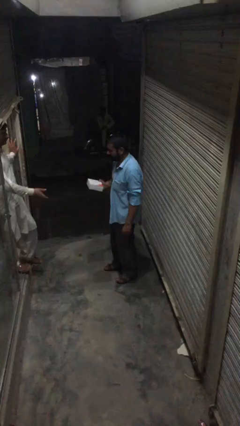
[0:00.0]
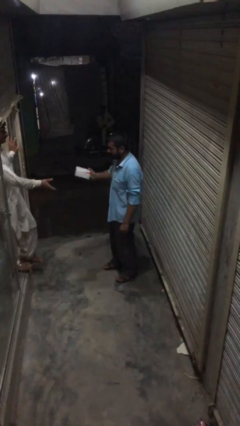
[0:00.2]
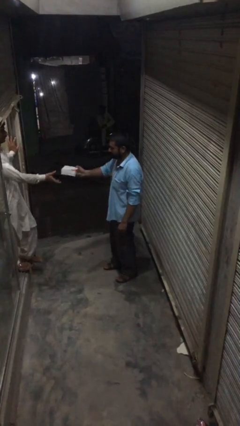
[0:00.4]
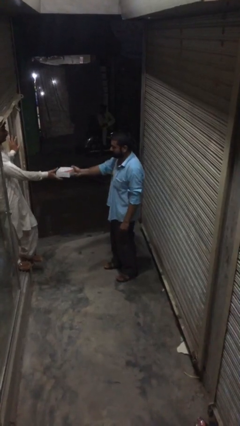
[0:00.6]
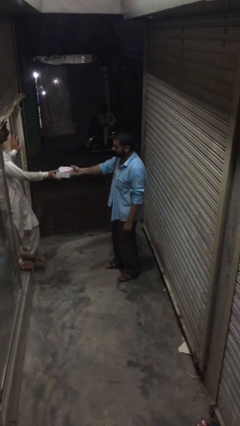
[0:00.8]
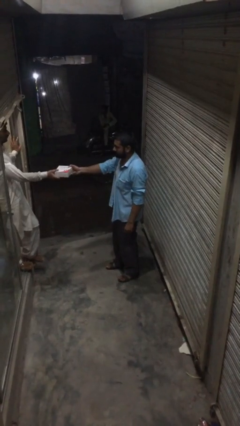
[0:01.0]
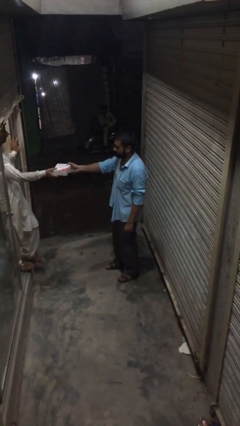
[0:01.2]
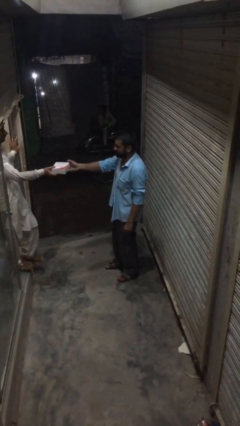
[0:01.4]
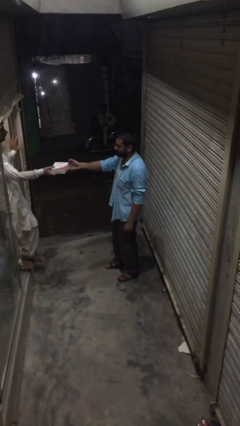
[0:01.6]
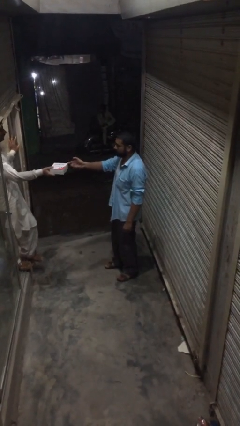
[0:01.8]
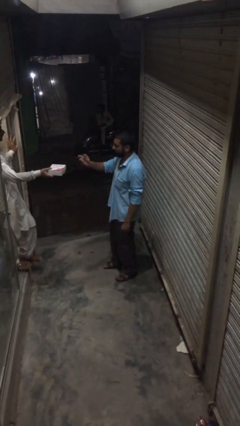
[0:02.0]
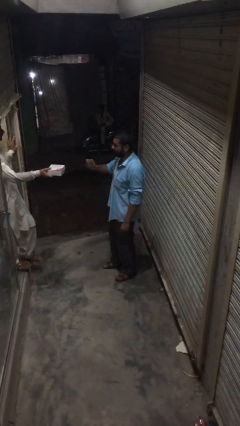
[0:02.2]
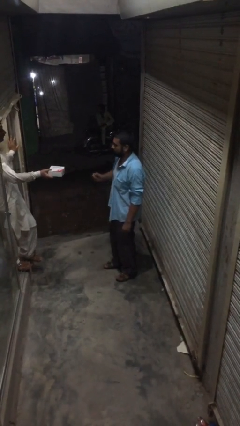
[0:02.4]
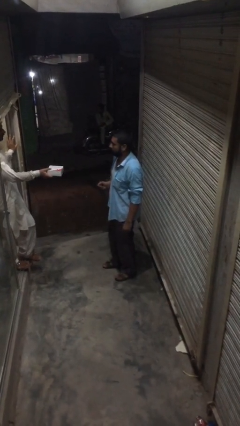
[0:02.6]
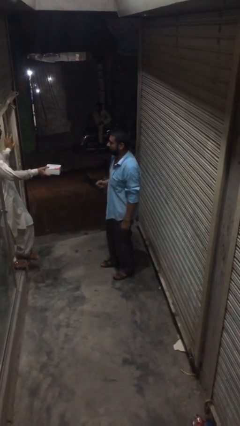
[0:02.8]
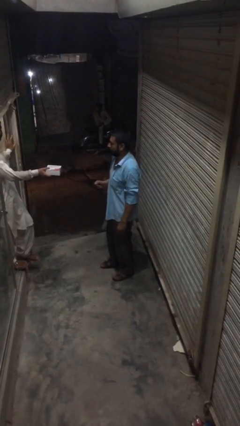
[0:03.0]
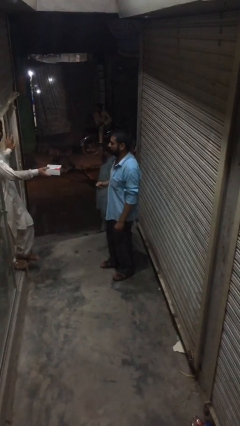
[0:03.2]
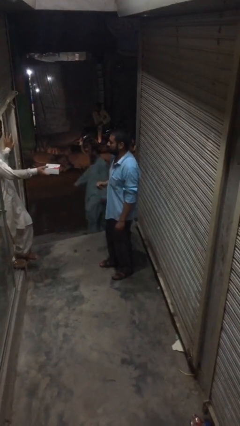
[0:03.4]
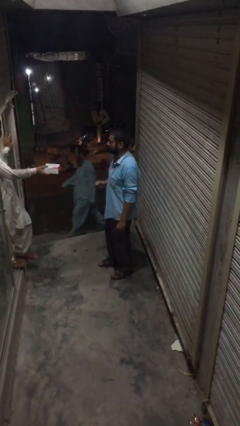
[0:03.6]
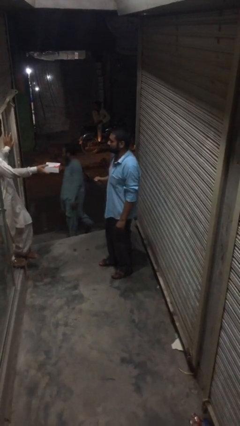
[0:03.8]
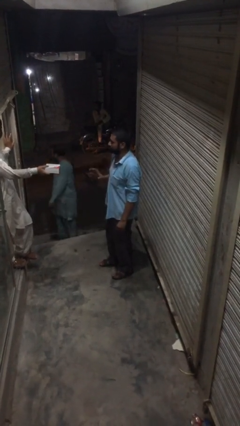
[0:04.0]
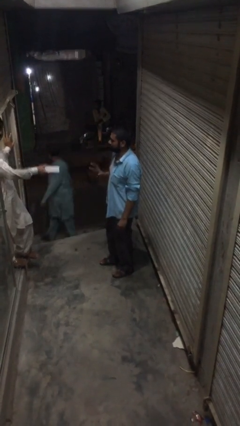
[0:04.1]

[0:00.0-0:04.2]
person transfers object to person

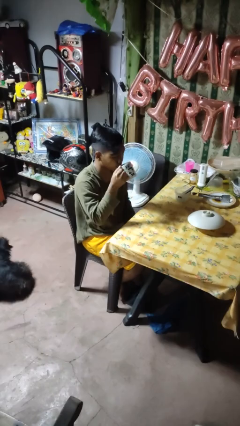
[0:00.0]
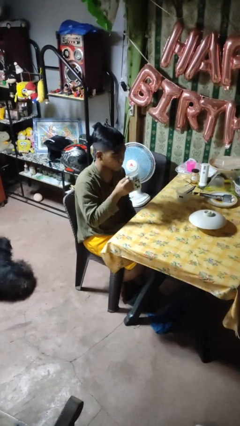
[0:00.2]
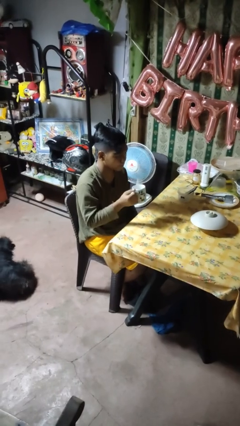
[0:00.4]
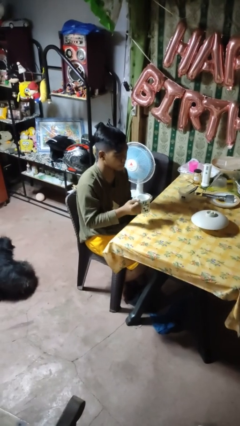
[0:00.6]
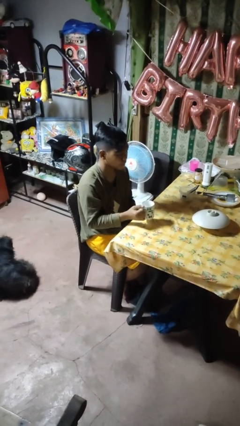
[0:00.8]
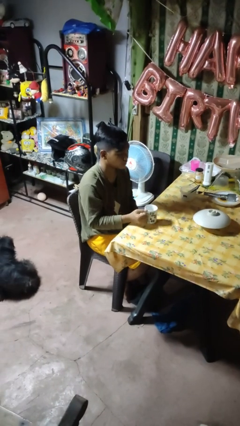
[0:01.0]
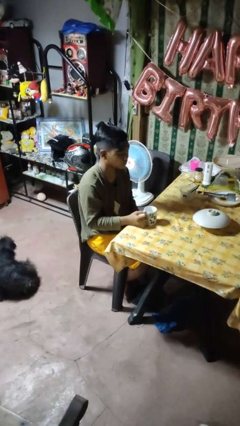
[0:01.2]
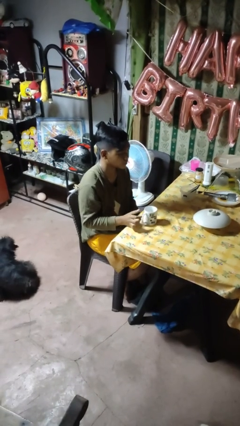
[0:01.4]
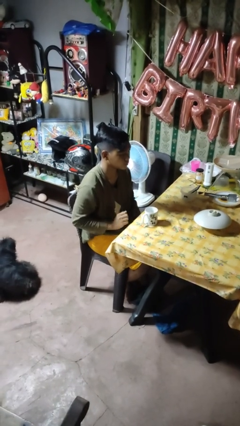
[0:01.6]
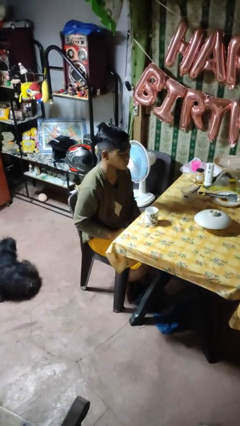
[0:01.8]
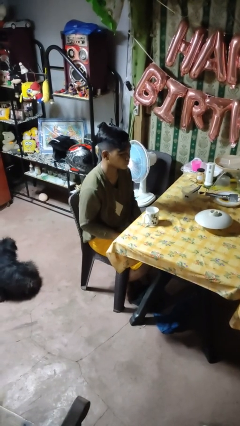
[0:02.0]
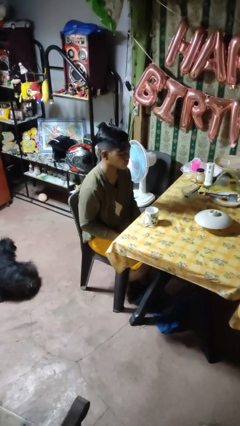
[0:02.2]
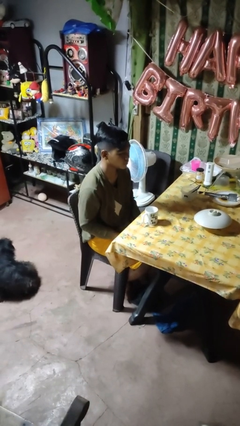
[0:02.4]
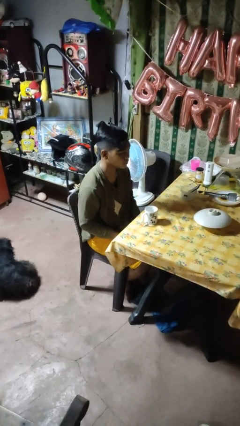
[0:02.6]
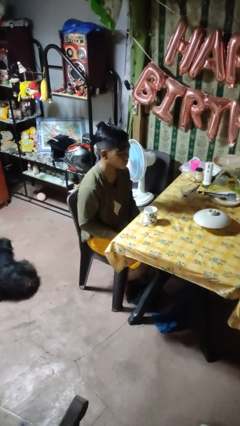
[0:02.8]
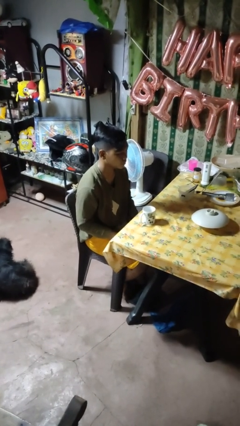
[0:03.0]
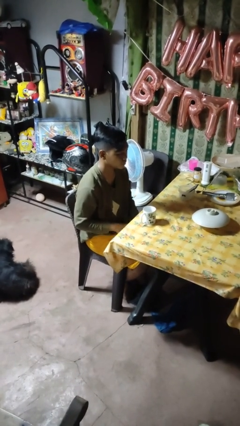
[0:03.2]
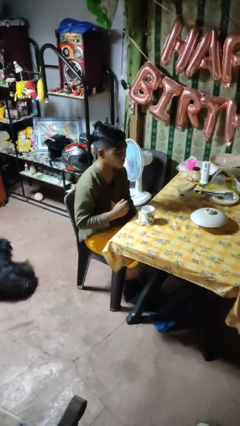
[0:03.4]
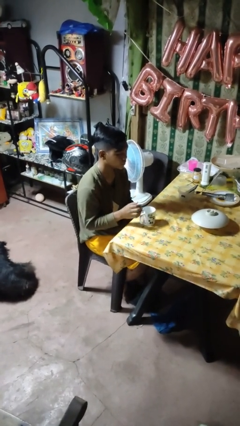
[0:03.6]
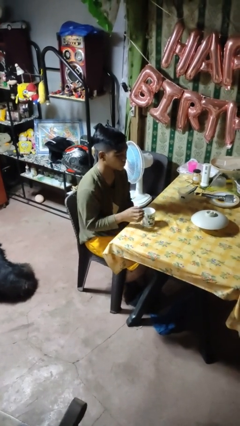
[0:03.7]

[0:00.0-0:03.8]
person puts down object on table

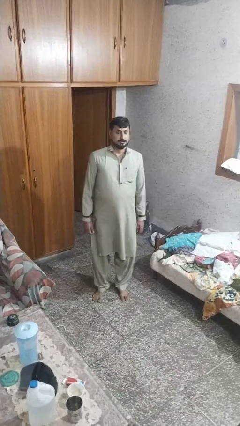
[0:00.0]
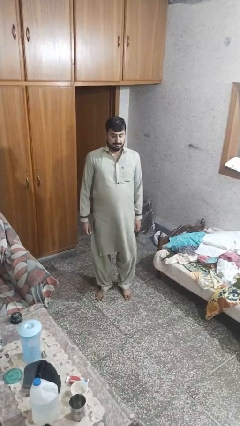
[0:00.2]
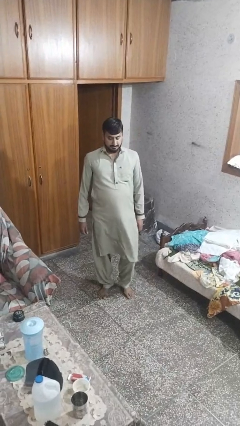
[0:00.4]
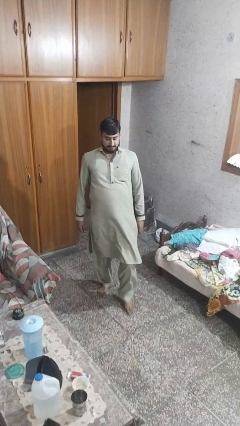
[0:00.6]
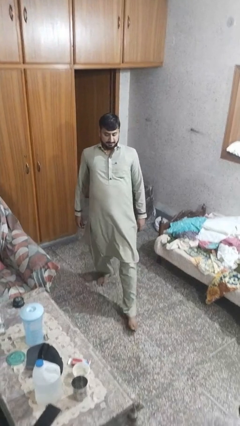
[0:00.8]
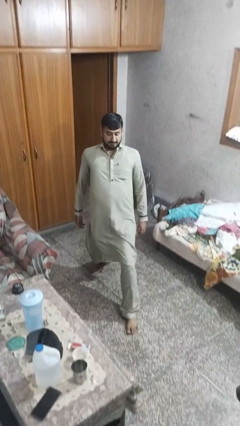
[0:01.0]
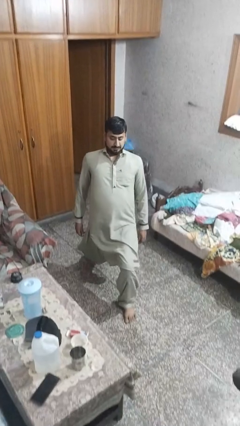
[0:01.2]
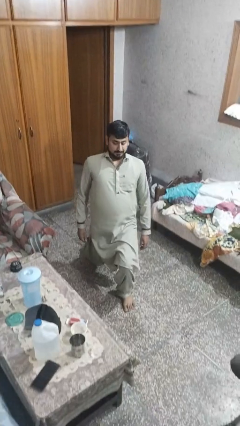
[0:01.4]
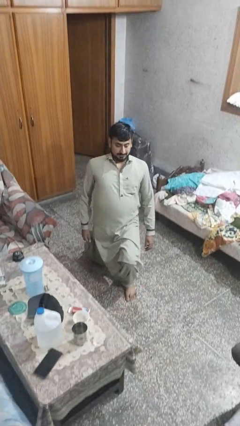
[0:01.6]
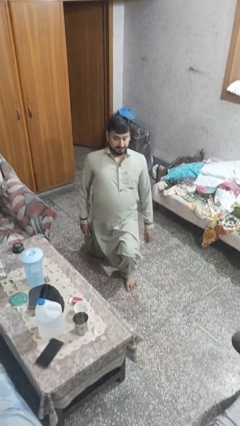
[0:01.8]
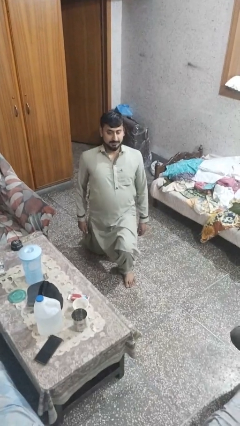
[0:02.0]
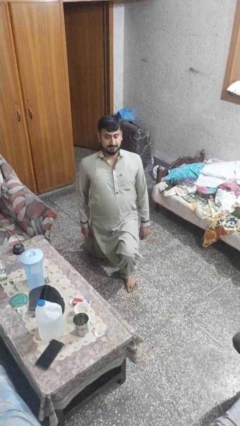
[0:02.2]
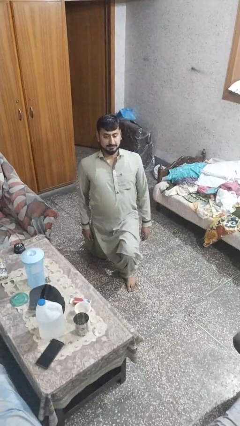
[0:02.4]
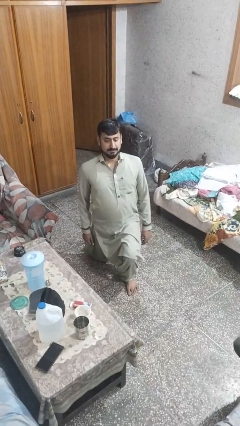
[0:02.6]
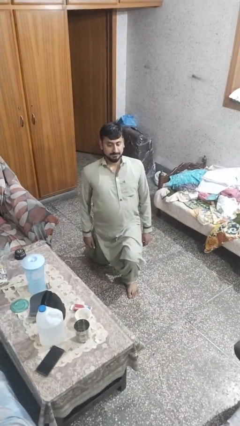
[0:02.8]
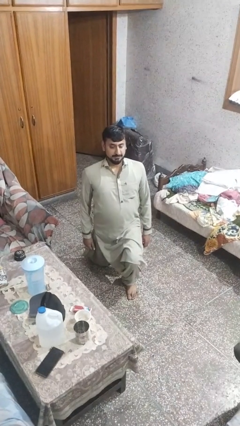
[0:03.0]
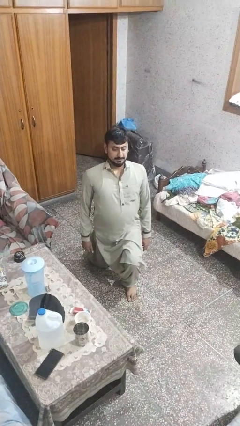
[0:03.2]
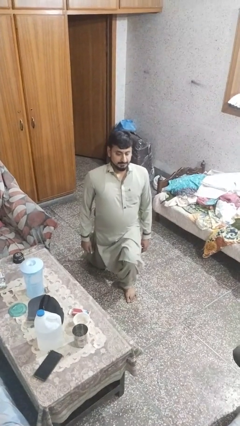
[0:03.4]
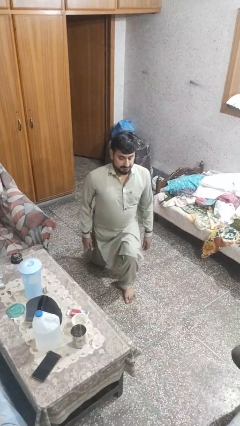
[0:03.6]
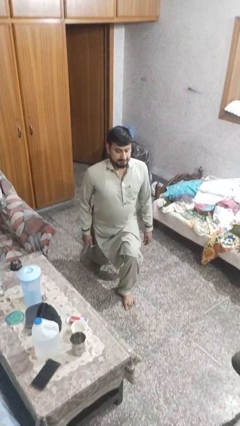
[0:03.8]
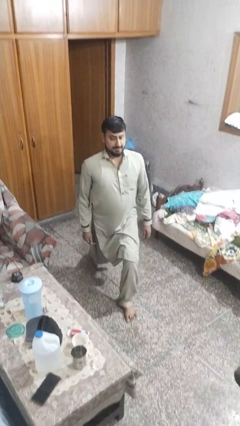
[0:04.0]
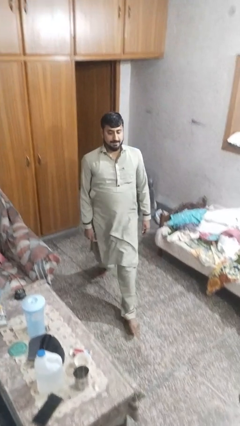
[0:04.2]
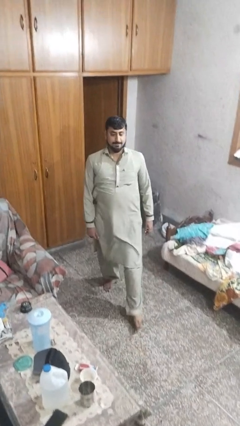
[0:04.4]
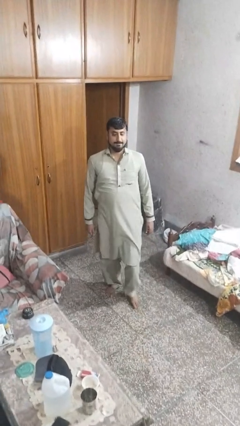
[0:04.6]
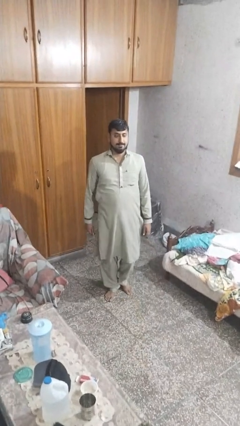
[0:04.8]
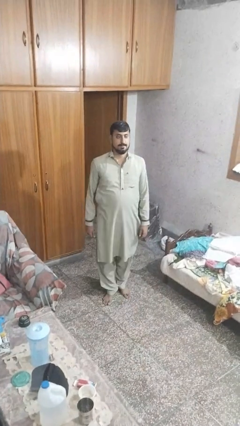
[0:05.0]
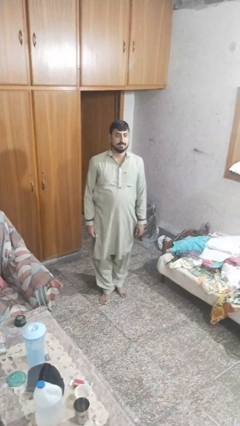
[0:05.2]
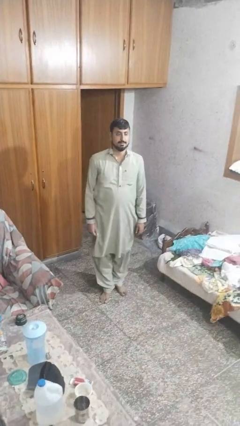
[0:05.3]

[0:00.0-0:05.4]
person exercises with lunges

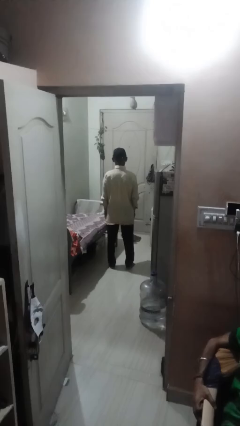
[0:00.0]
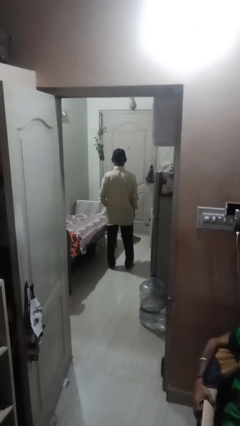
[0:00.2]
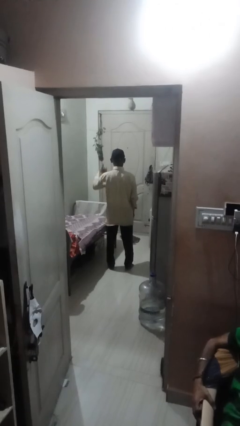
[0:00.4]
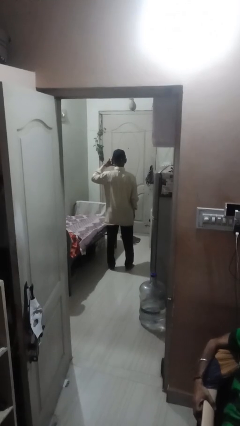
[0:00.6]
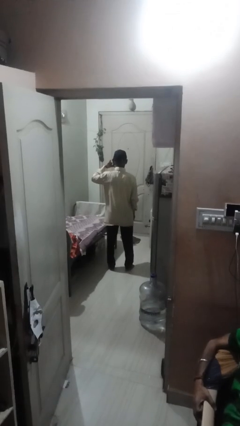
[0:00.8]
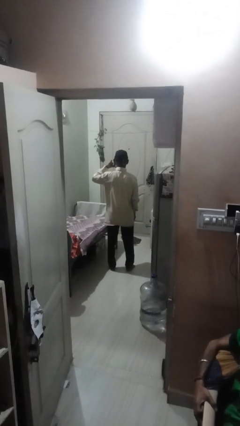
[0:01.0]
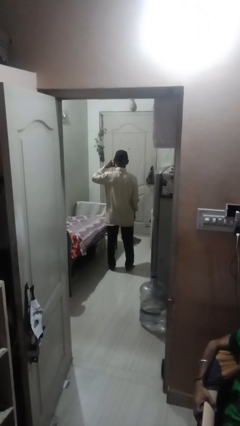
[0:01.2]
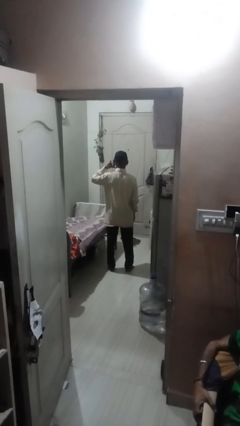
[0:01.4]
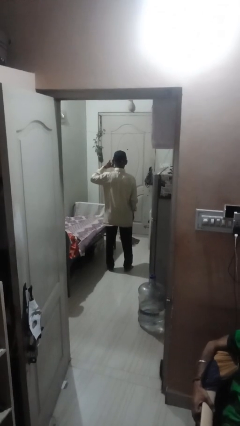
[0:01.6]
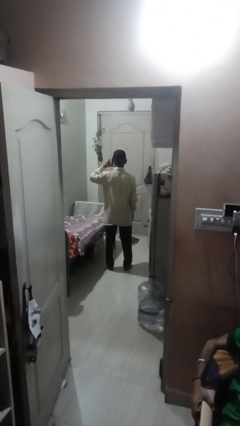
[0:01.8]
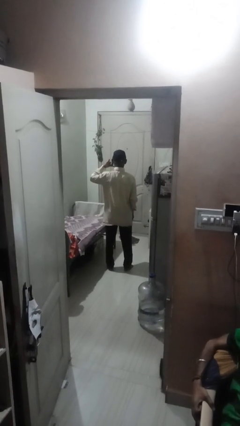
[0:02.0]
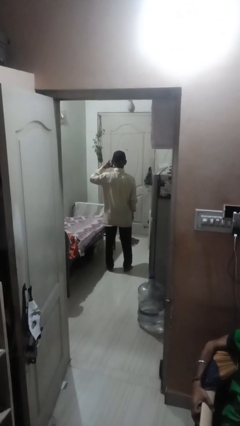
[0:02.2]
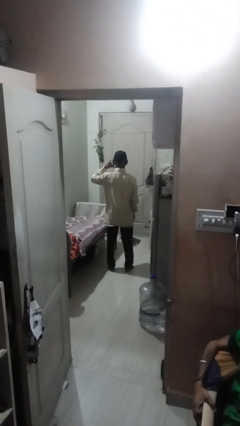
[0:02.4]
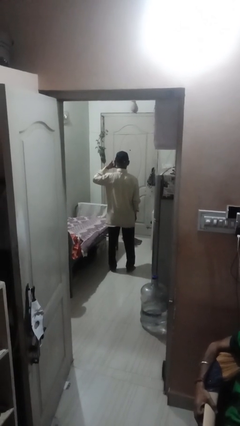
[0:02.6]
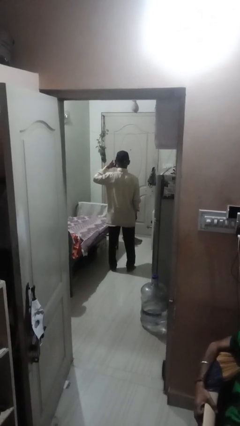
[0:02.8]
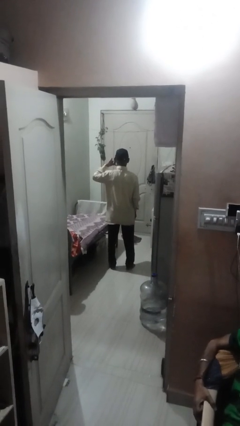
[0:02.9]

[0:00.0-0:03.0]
person gestures call me

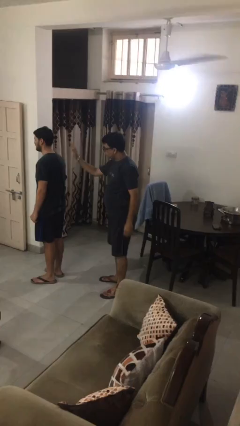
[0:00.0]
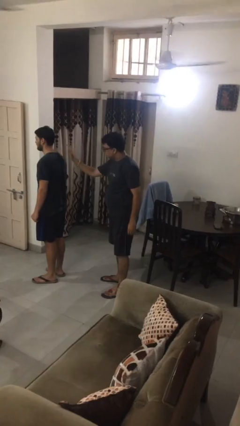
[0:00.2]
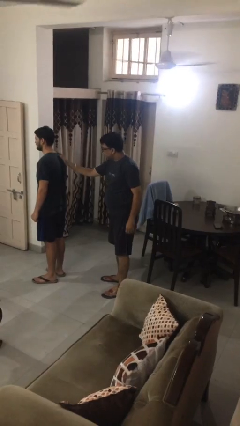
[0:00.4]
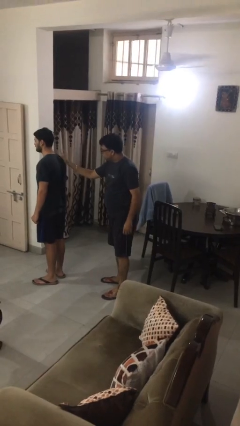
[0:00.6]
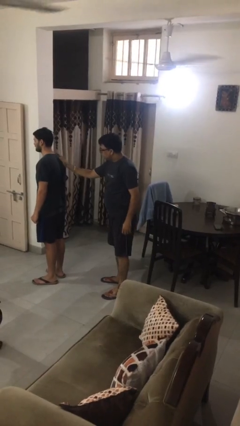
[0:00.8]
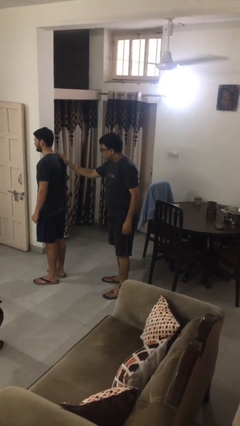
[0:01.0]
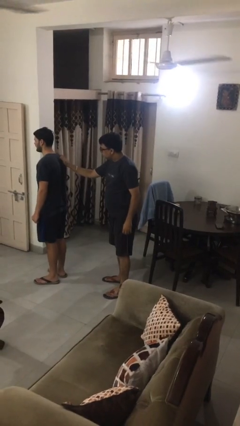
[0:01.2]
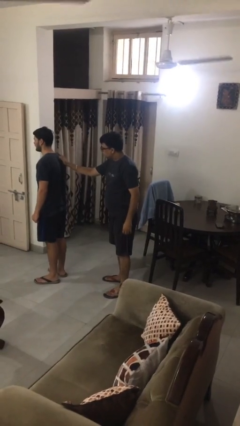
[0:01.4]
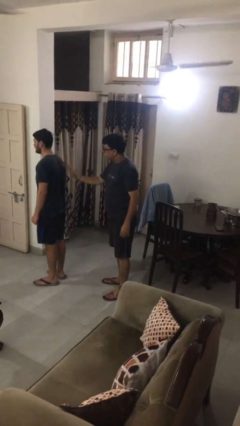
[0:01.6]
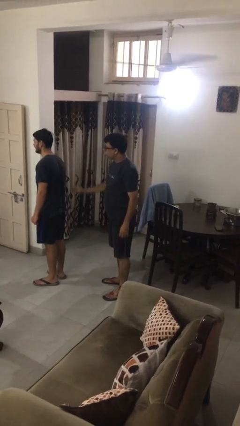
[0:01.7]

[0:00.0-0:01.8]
person touches back of person
